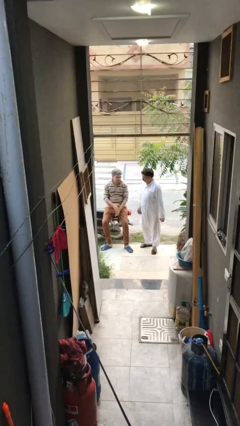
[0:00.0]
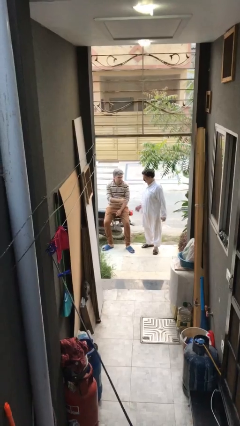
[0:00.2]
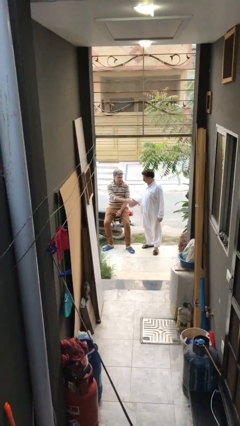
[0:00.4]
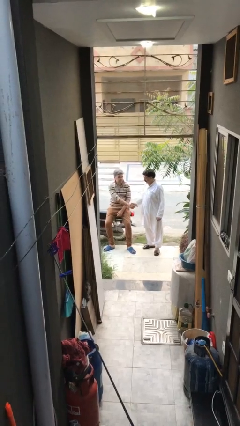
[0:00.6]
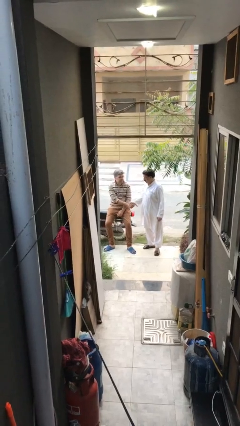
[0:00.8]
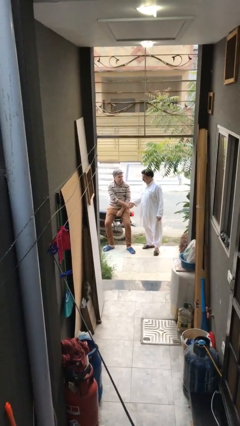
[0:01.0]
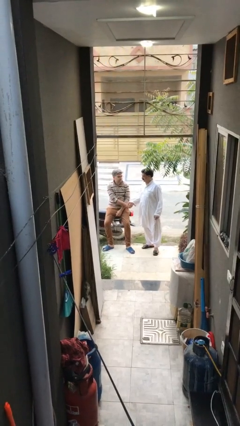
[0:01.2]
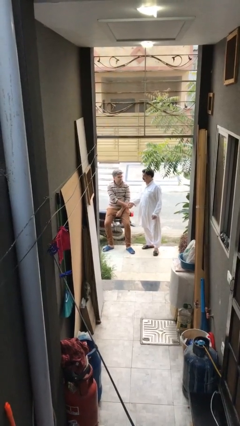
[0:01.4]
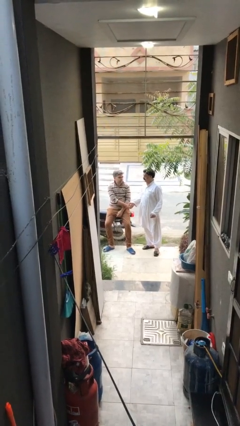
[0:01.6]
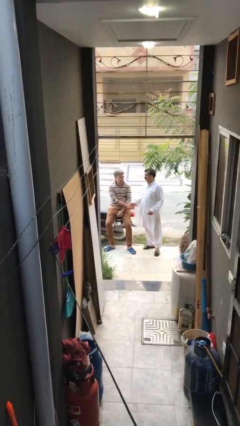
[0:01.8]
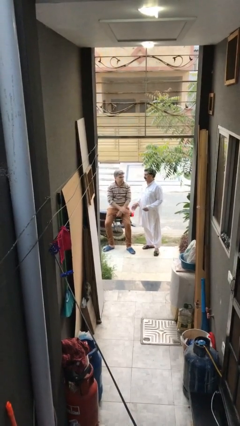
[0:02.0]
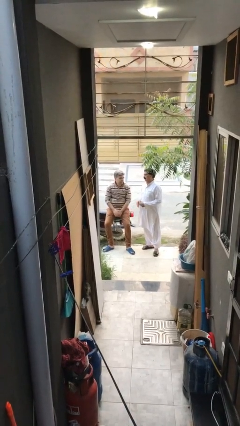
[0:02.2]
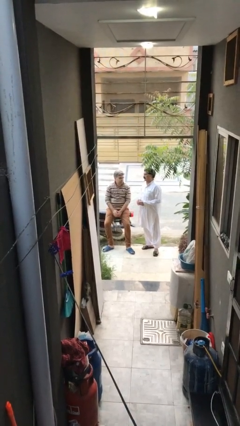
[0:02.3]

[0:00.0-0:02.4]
person shakes hand

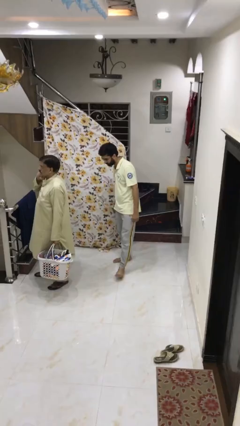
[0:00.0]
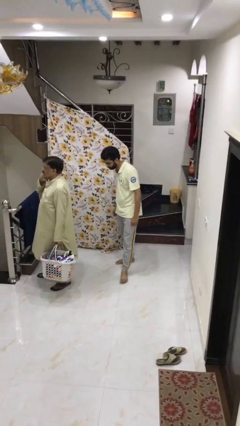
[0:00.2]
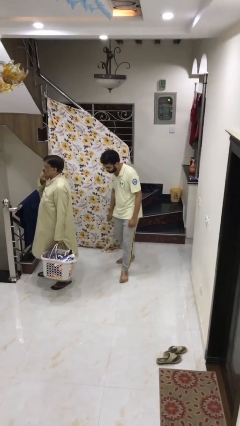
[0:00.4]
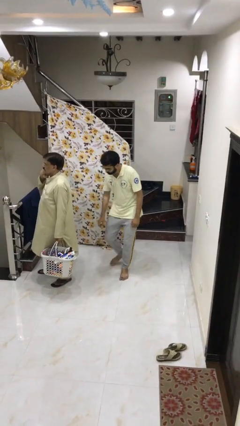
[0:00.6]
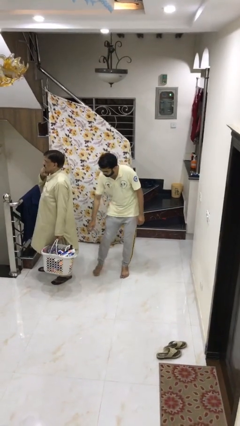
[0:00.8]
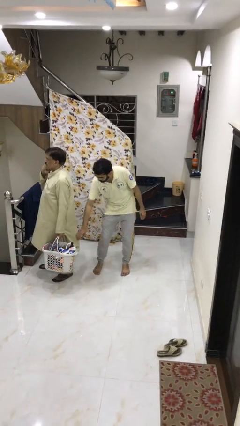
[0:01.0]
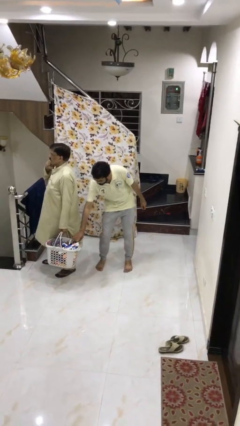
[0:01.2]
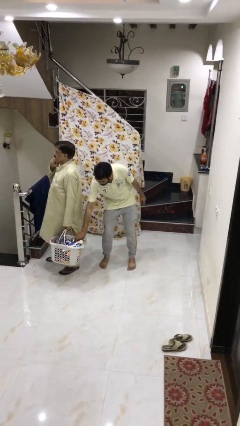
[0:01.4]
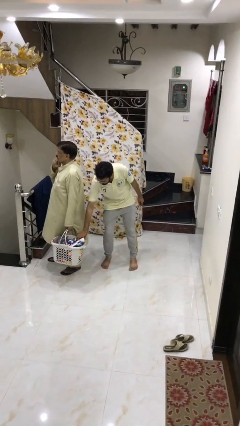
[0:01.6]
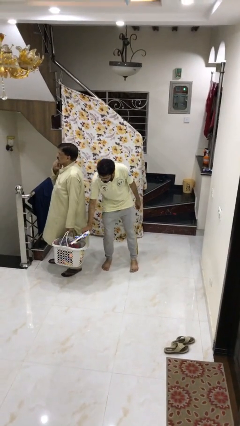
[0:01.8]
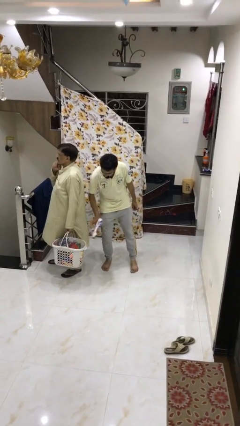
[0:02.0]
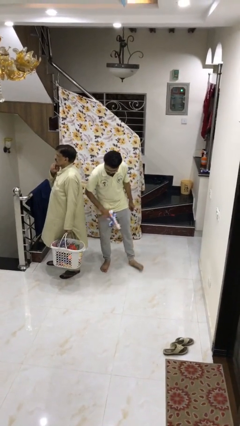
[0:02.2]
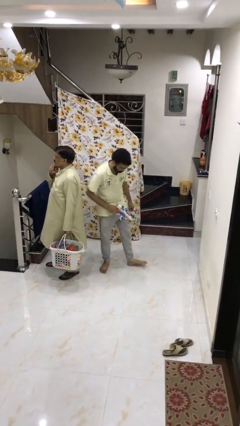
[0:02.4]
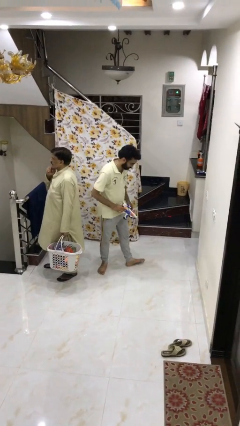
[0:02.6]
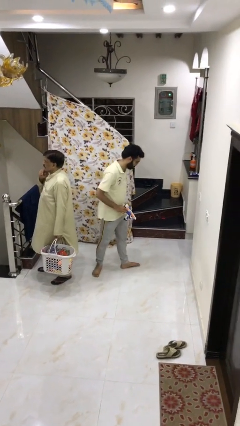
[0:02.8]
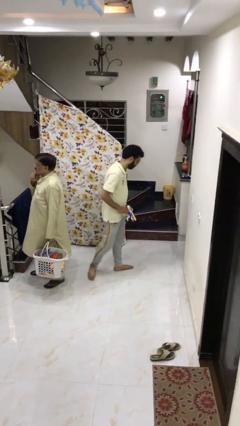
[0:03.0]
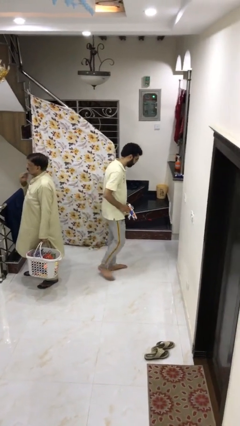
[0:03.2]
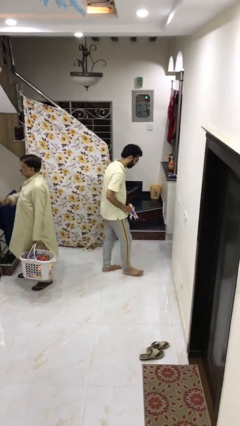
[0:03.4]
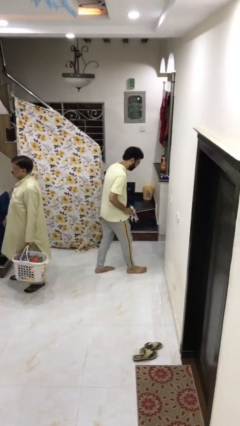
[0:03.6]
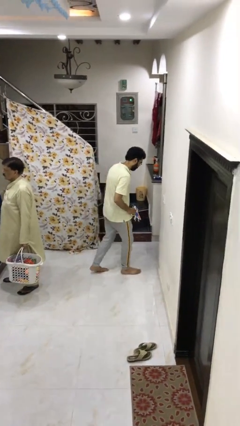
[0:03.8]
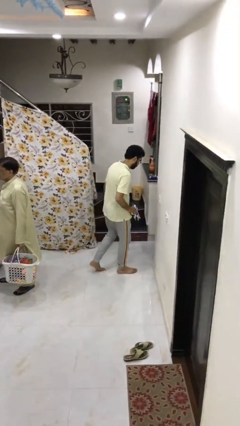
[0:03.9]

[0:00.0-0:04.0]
person steals object from person

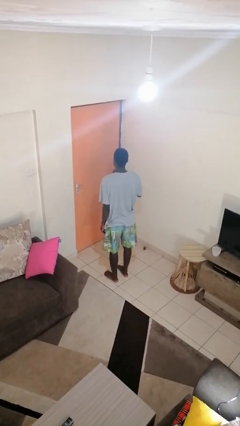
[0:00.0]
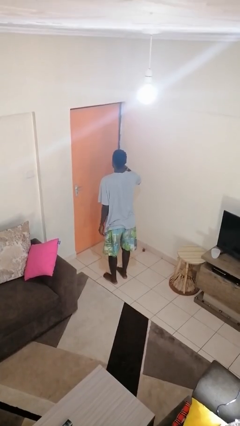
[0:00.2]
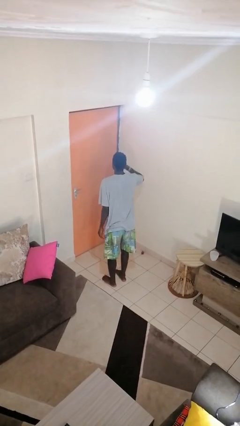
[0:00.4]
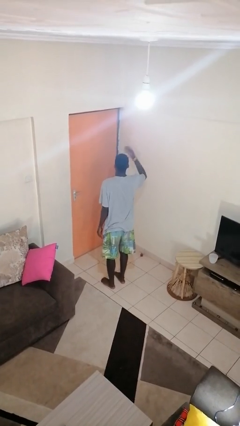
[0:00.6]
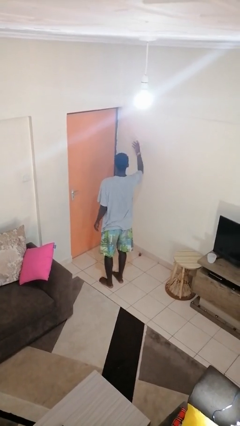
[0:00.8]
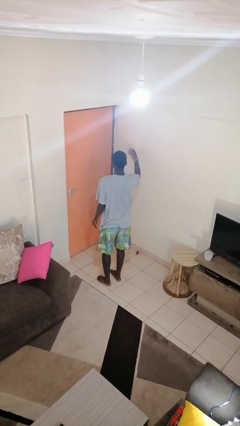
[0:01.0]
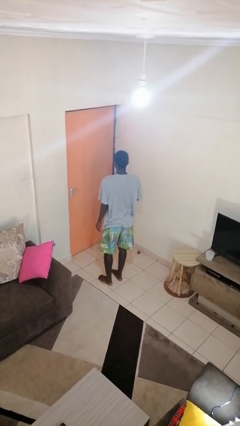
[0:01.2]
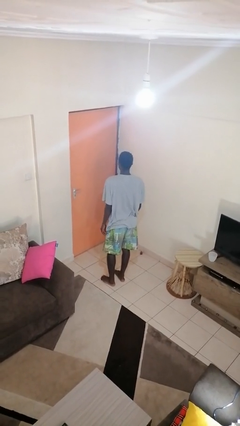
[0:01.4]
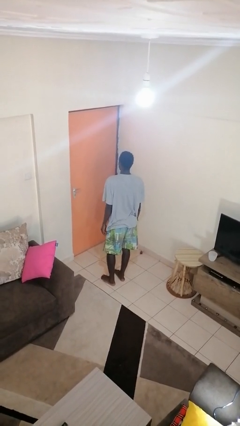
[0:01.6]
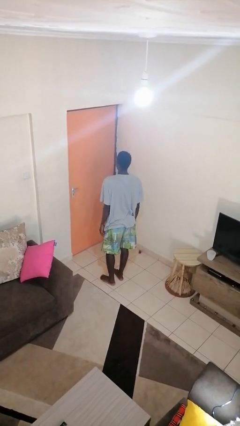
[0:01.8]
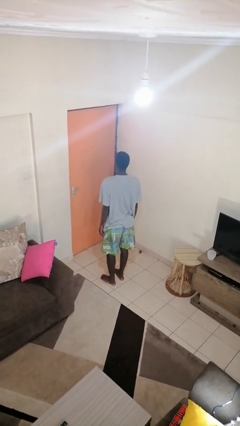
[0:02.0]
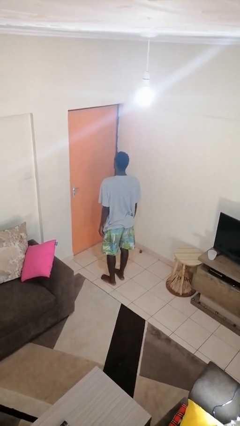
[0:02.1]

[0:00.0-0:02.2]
person gestures blow kiss

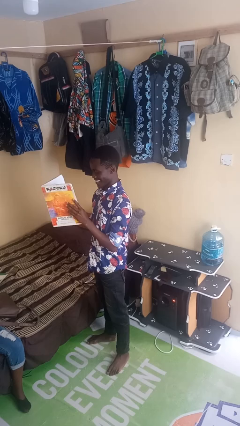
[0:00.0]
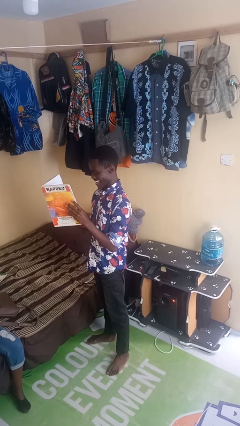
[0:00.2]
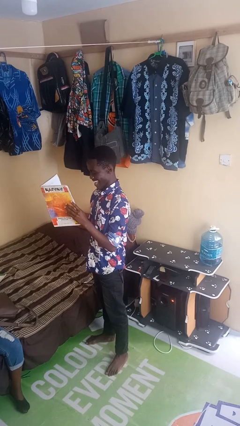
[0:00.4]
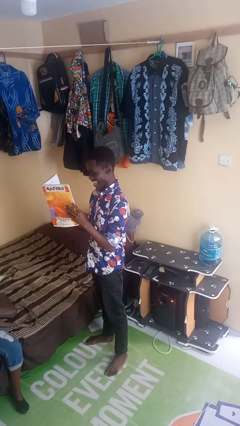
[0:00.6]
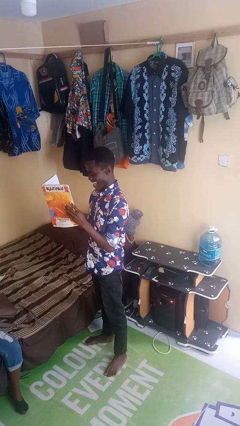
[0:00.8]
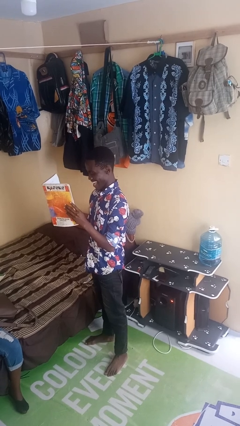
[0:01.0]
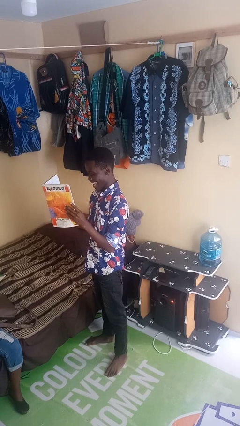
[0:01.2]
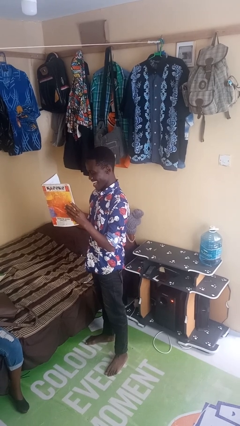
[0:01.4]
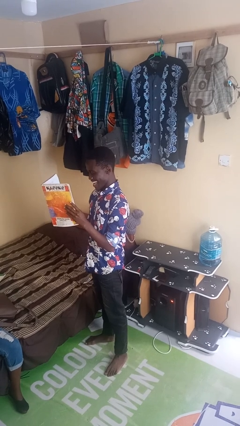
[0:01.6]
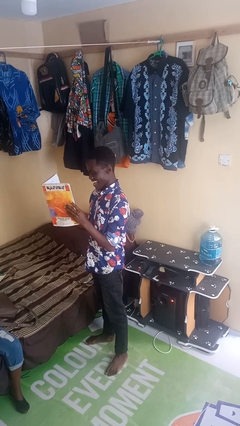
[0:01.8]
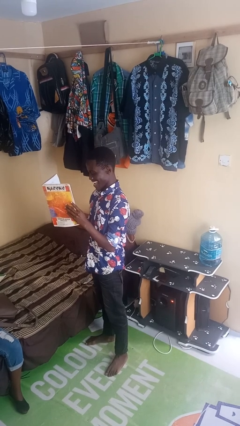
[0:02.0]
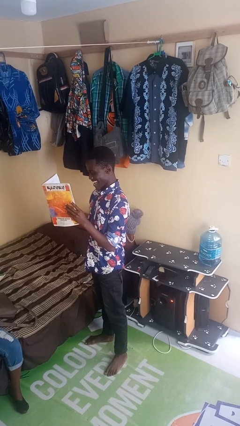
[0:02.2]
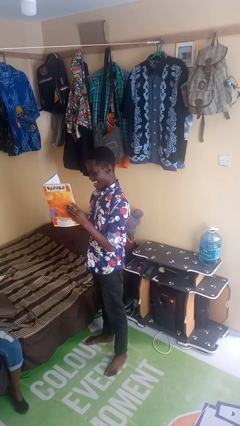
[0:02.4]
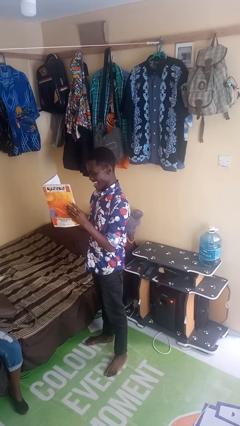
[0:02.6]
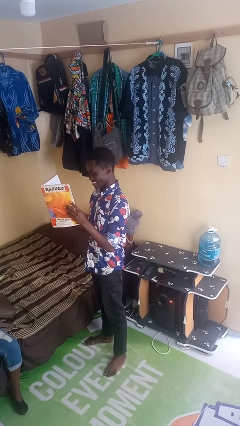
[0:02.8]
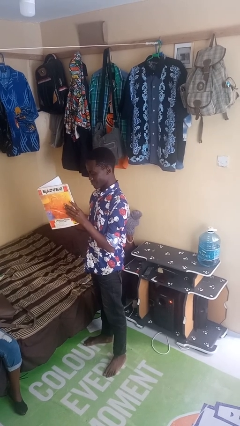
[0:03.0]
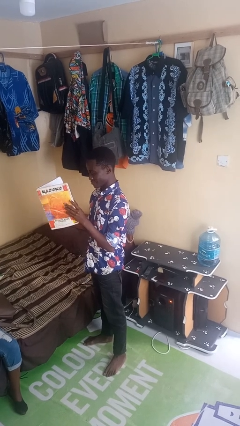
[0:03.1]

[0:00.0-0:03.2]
person reads newspaper

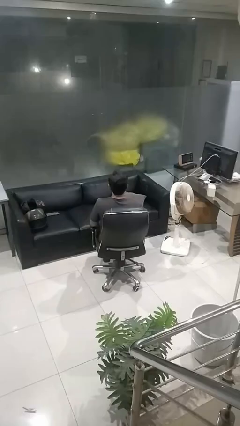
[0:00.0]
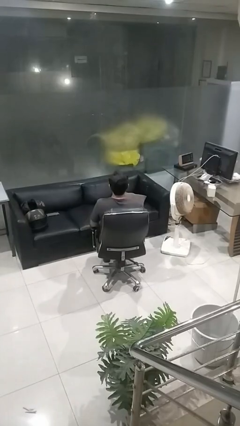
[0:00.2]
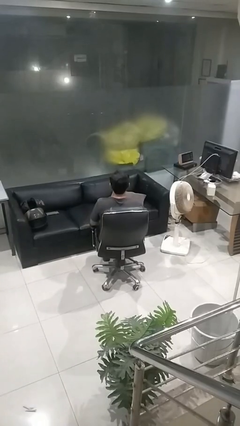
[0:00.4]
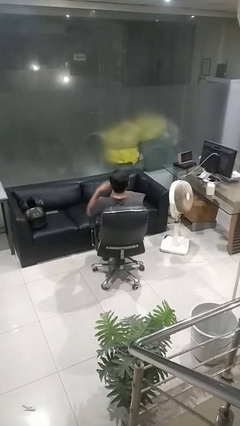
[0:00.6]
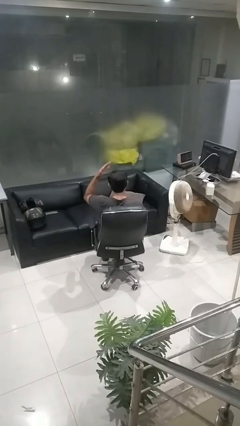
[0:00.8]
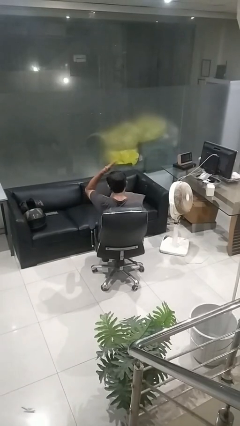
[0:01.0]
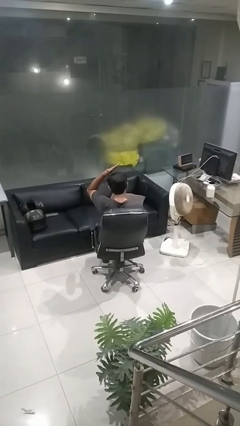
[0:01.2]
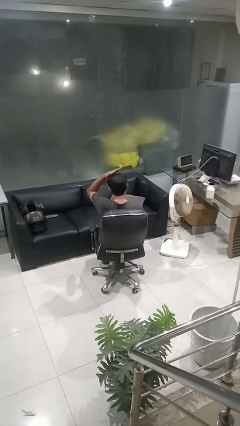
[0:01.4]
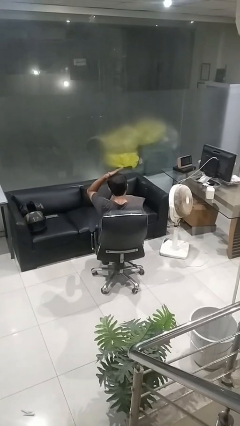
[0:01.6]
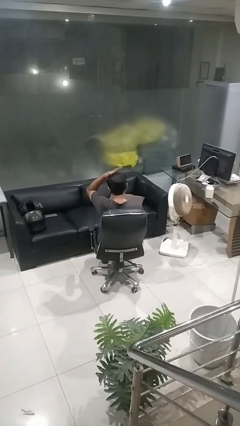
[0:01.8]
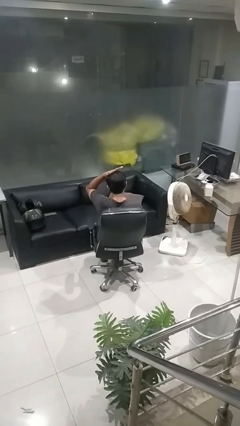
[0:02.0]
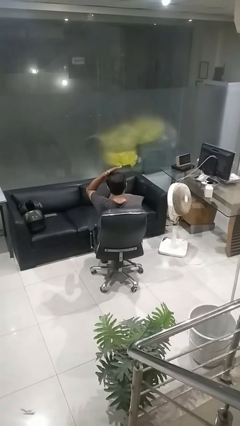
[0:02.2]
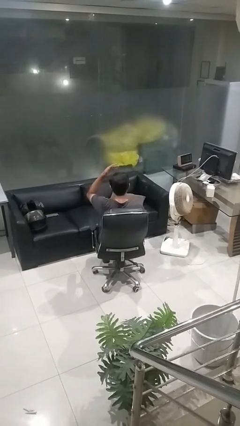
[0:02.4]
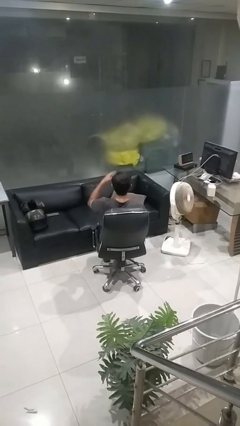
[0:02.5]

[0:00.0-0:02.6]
person pats head

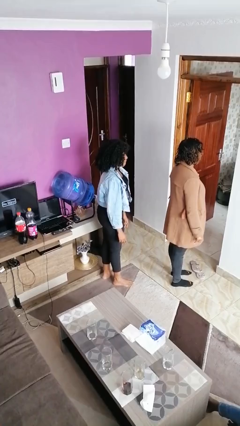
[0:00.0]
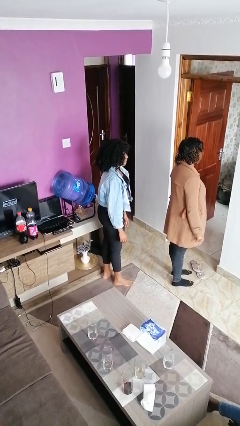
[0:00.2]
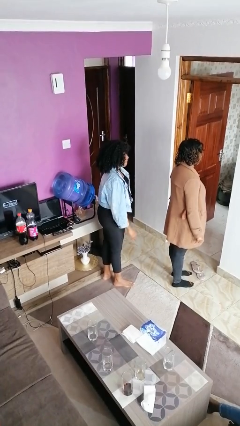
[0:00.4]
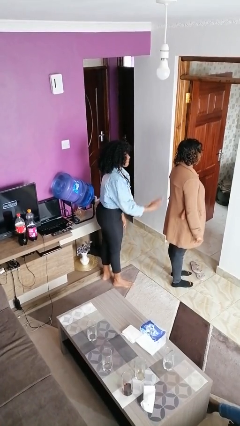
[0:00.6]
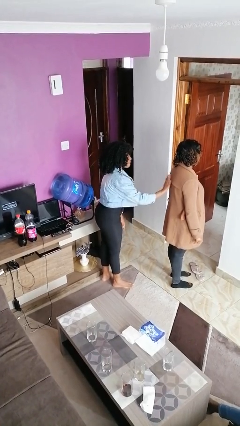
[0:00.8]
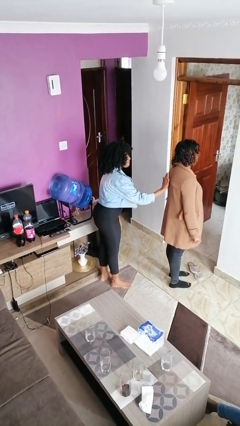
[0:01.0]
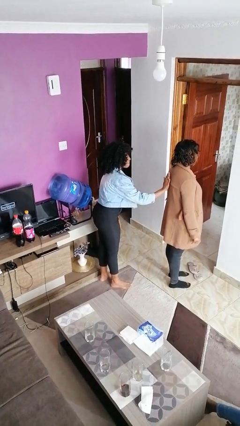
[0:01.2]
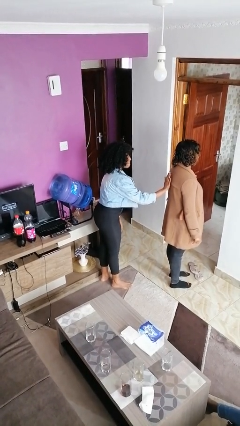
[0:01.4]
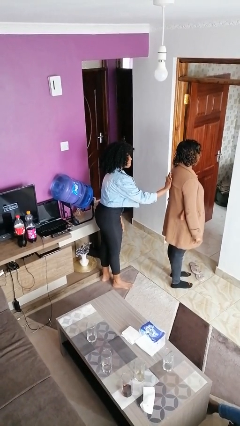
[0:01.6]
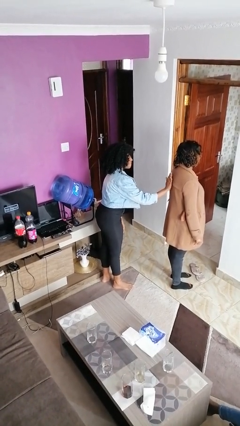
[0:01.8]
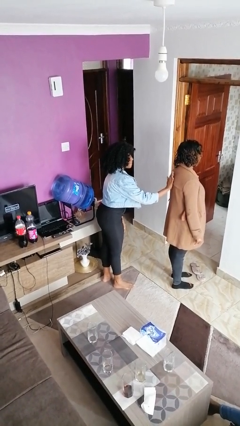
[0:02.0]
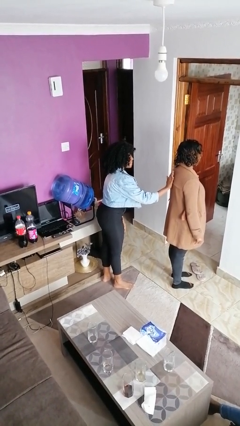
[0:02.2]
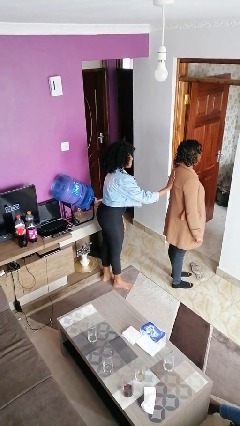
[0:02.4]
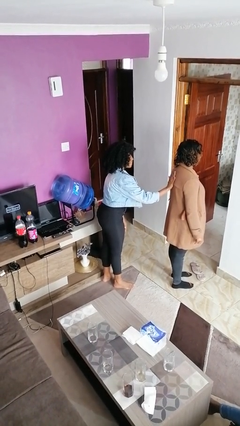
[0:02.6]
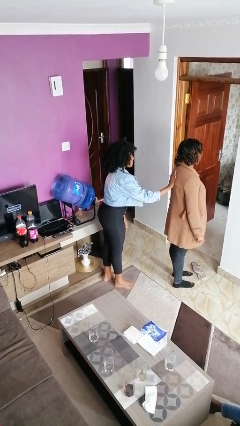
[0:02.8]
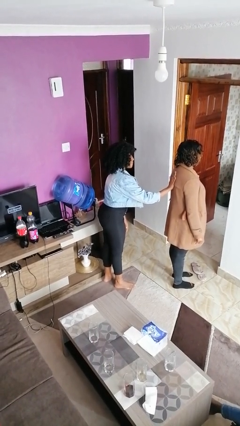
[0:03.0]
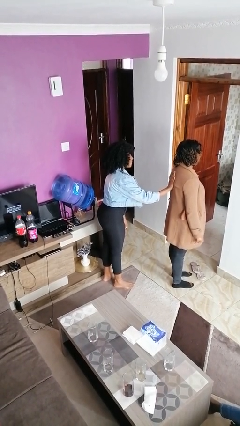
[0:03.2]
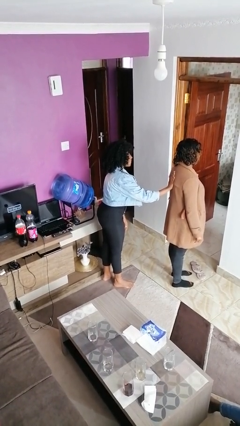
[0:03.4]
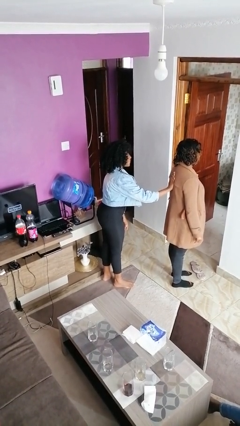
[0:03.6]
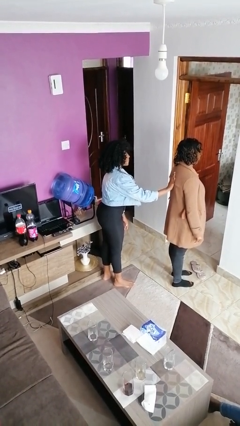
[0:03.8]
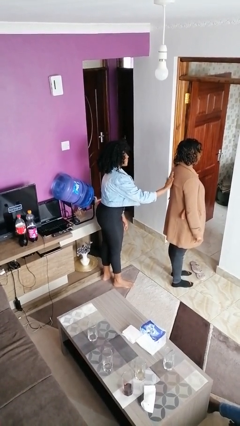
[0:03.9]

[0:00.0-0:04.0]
person touches back of person
